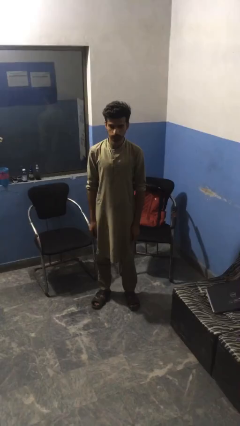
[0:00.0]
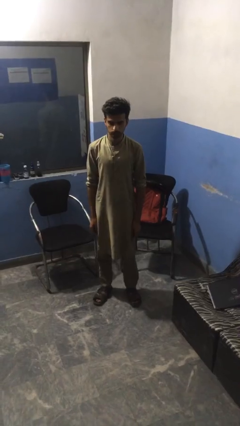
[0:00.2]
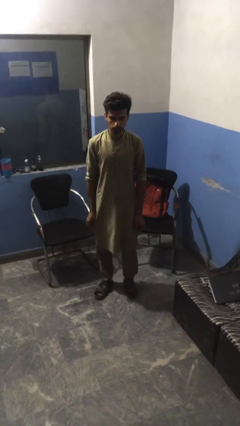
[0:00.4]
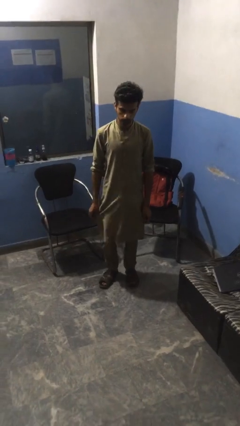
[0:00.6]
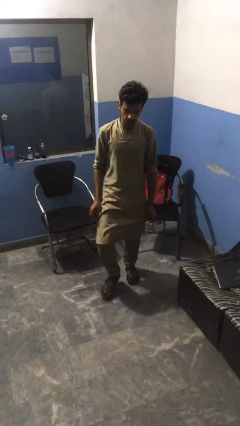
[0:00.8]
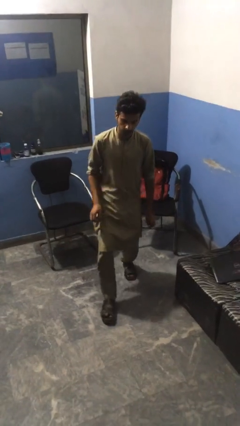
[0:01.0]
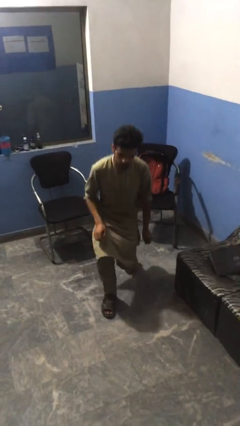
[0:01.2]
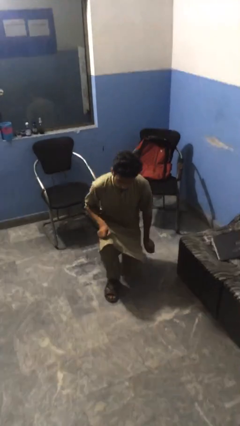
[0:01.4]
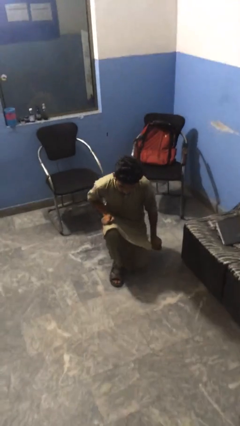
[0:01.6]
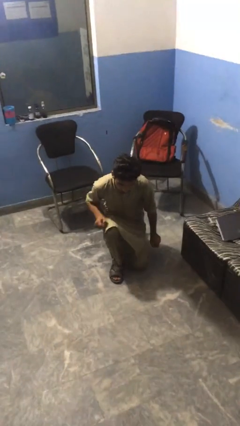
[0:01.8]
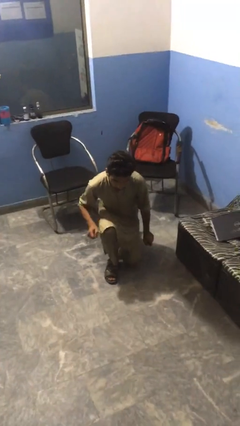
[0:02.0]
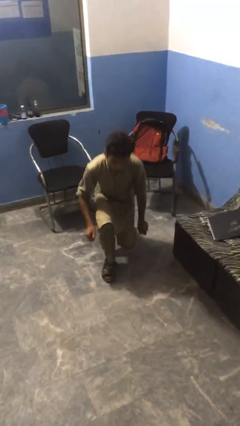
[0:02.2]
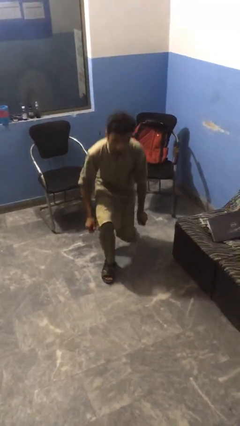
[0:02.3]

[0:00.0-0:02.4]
person exercises with lunges

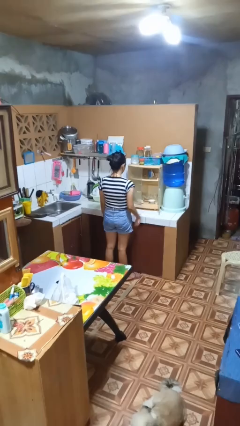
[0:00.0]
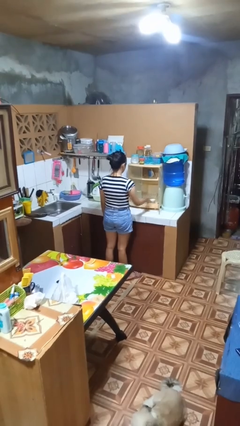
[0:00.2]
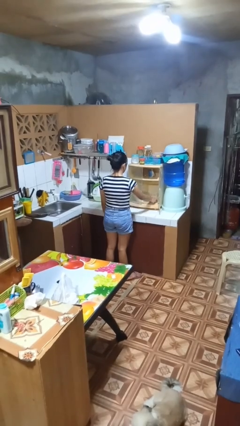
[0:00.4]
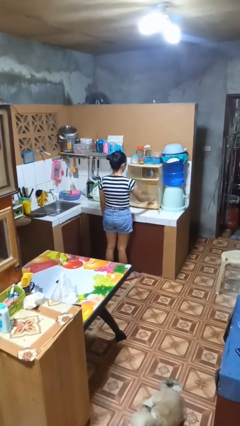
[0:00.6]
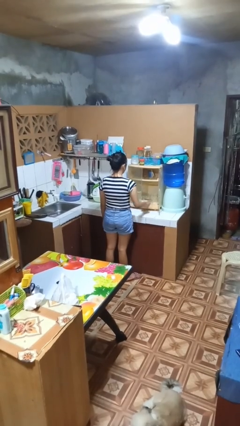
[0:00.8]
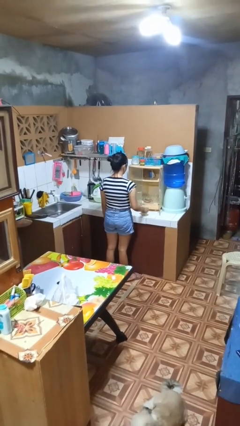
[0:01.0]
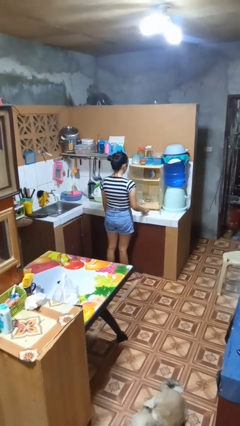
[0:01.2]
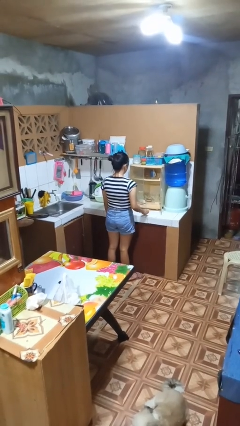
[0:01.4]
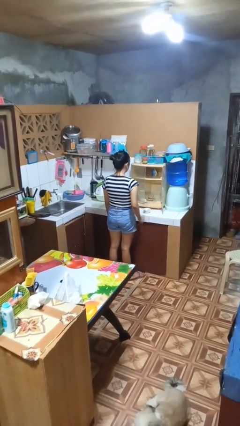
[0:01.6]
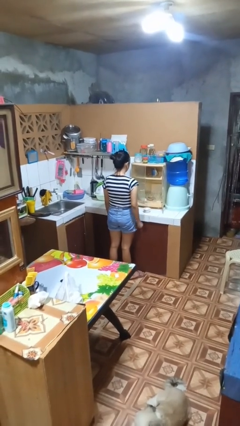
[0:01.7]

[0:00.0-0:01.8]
person takes object from cabinet

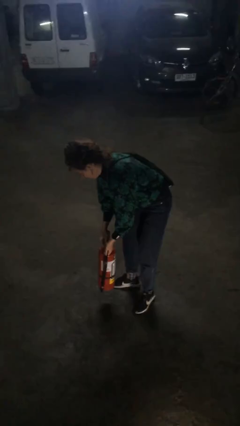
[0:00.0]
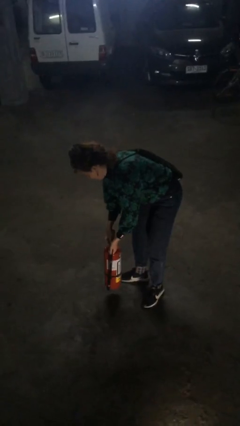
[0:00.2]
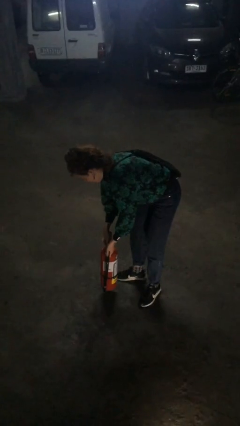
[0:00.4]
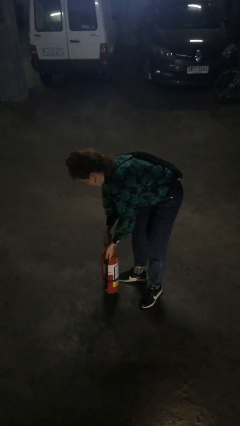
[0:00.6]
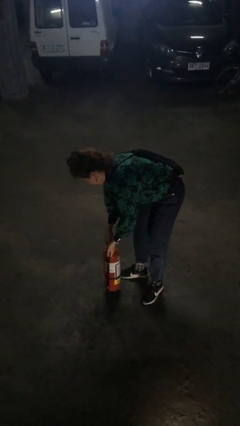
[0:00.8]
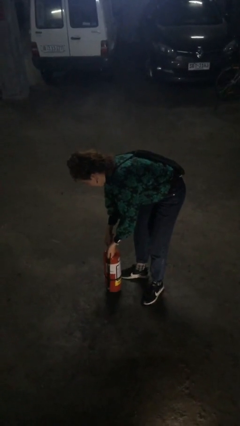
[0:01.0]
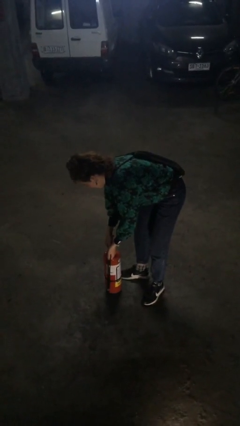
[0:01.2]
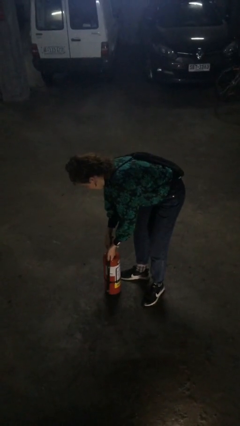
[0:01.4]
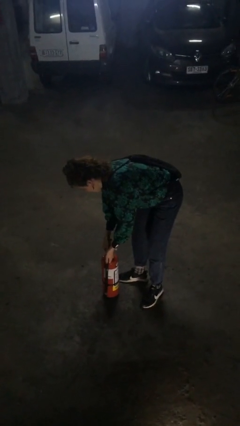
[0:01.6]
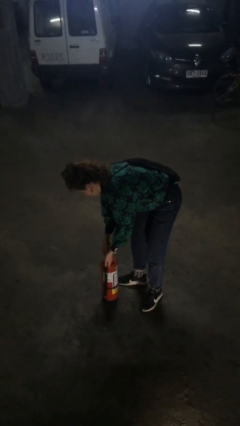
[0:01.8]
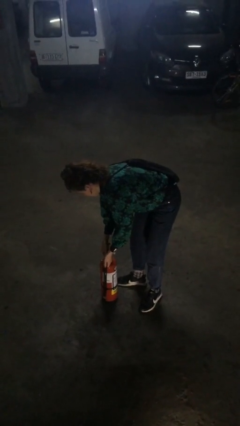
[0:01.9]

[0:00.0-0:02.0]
person puts down object on floor

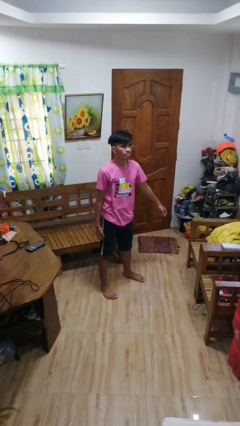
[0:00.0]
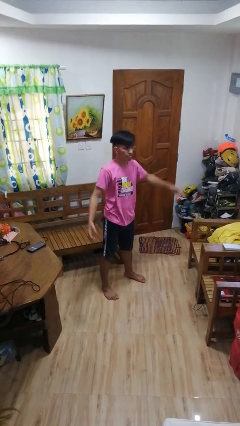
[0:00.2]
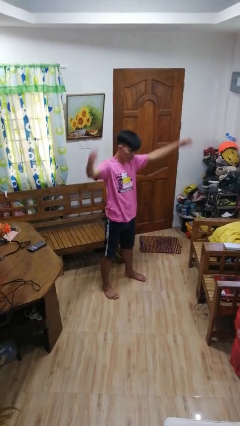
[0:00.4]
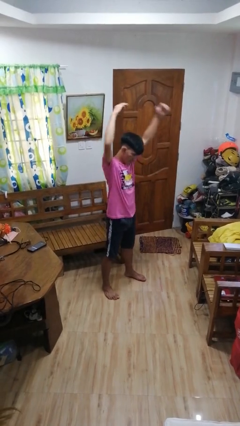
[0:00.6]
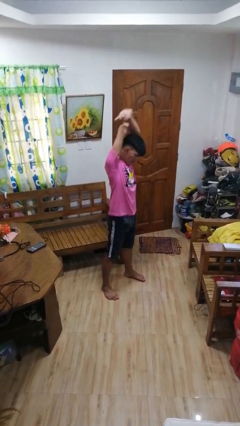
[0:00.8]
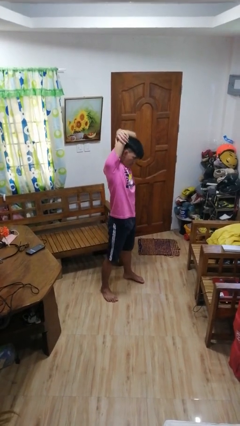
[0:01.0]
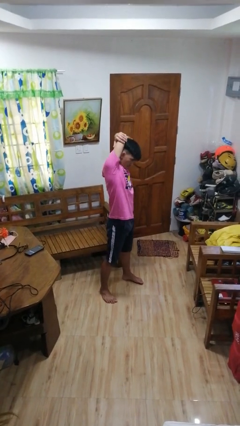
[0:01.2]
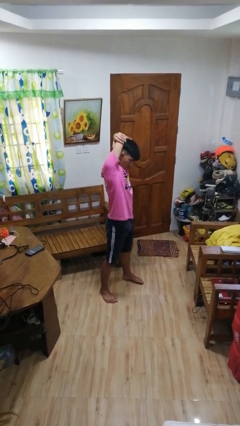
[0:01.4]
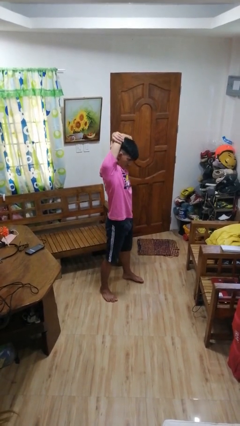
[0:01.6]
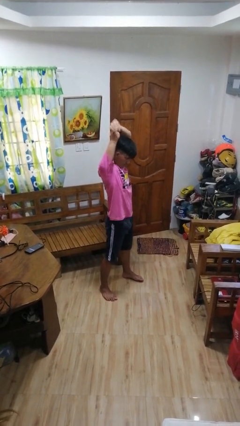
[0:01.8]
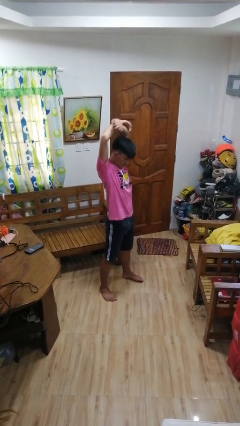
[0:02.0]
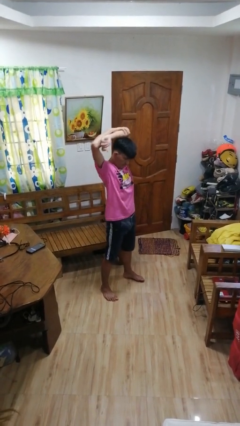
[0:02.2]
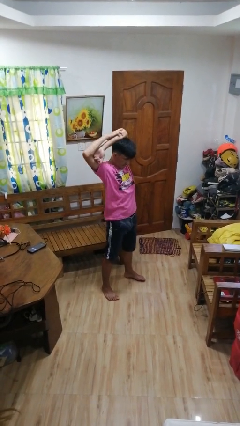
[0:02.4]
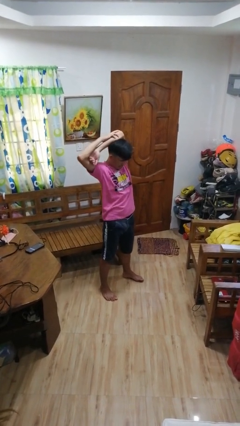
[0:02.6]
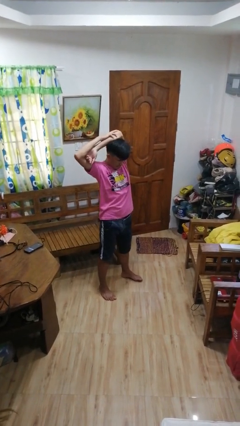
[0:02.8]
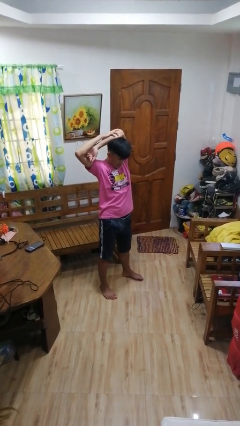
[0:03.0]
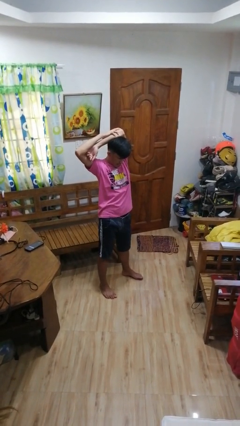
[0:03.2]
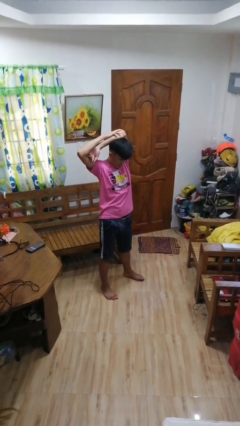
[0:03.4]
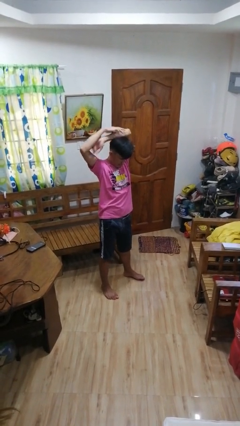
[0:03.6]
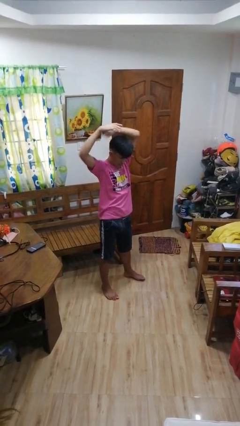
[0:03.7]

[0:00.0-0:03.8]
person stretches arms over head

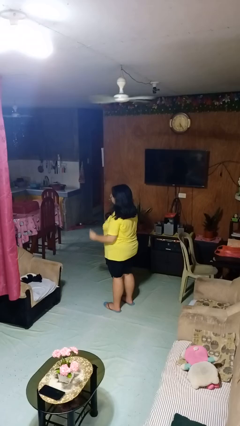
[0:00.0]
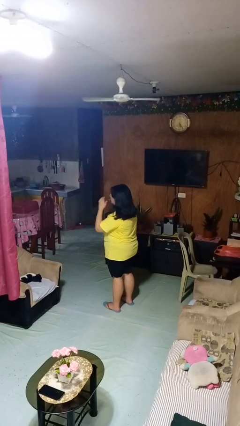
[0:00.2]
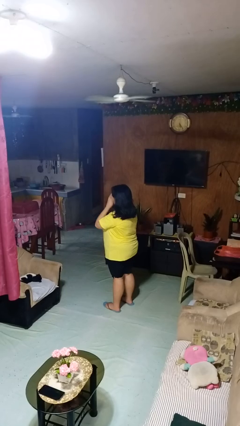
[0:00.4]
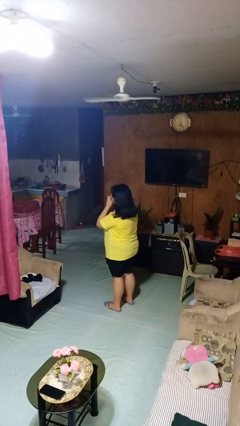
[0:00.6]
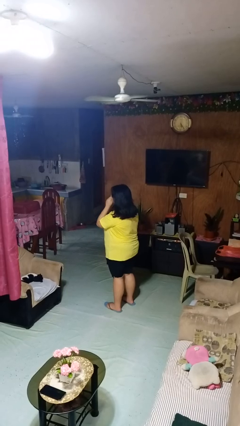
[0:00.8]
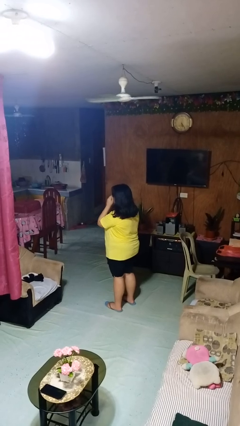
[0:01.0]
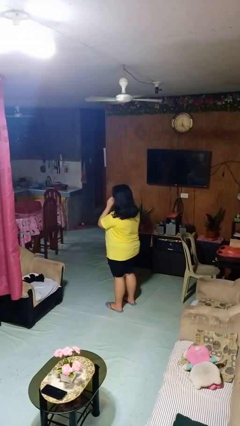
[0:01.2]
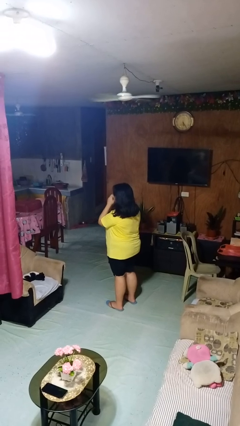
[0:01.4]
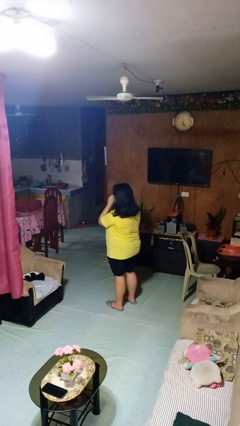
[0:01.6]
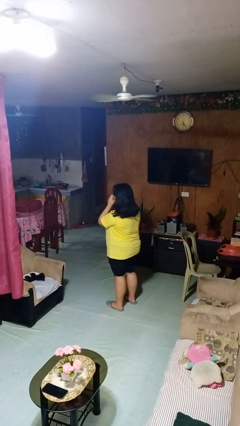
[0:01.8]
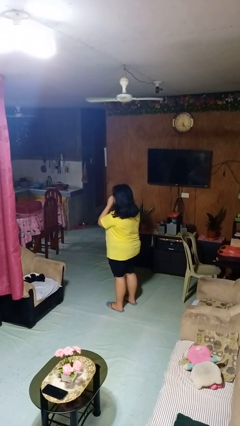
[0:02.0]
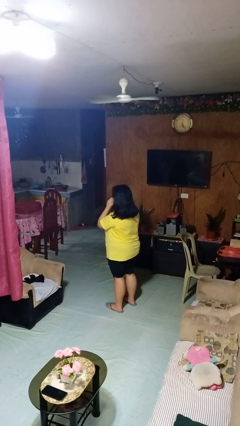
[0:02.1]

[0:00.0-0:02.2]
person scratches face

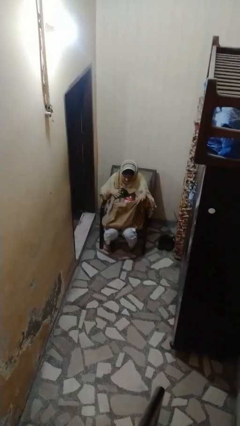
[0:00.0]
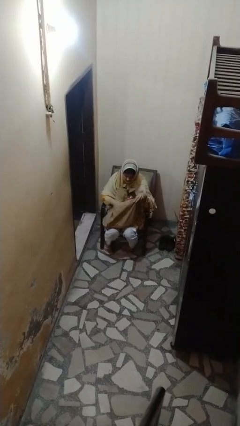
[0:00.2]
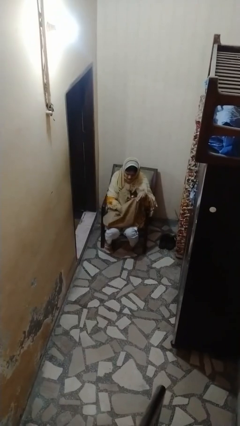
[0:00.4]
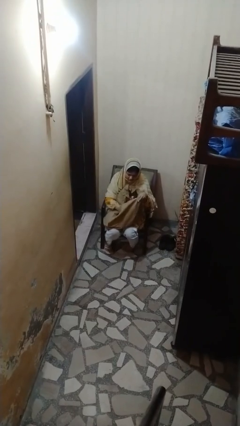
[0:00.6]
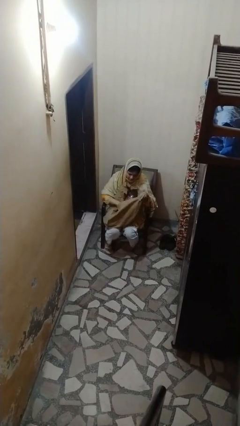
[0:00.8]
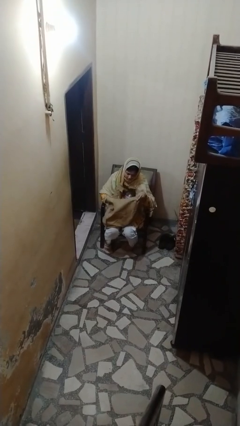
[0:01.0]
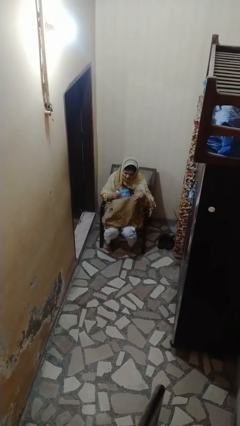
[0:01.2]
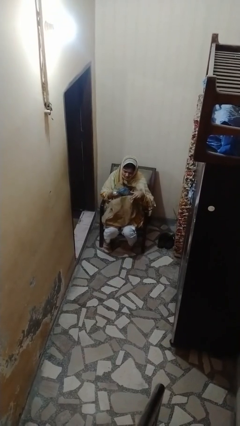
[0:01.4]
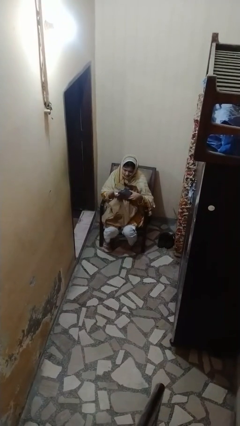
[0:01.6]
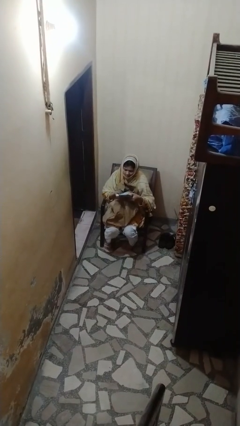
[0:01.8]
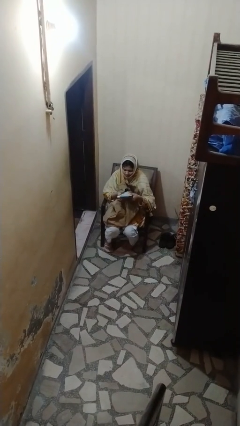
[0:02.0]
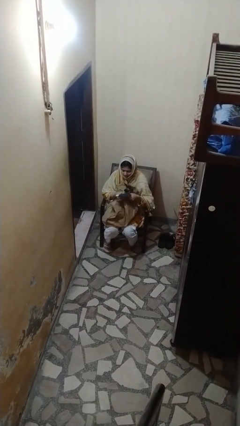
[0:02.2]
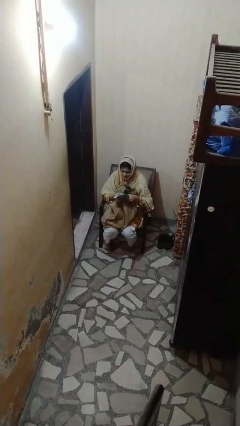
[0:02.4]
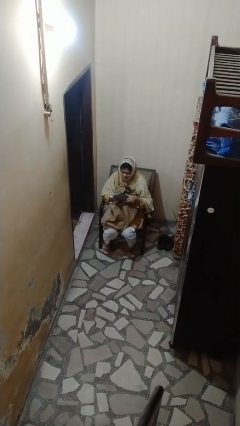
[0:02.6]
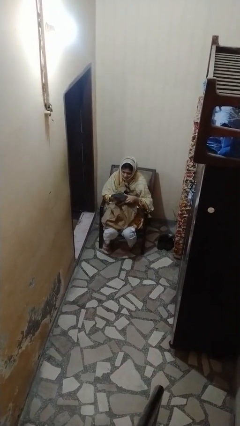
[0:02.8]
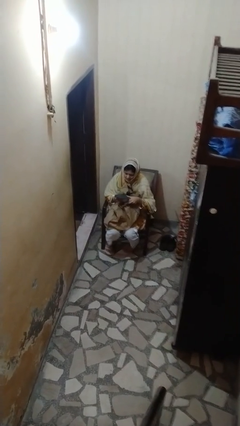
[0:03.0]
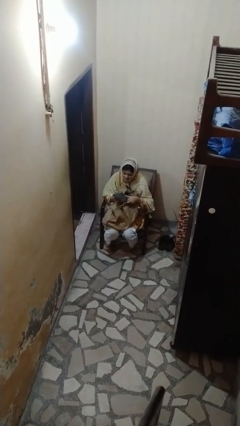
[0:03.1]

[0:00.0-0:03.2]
person takes object from bag

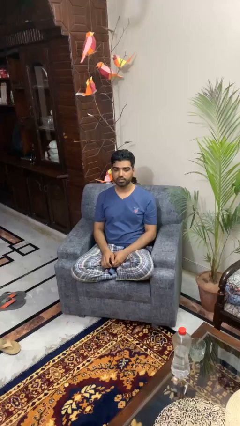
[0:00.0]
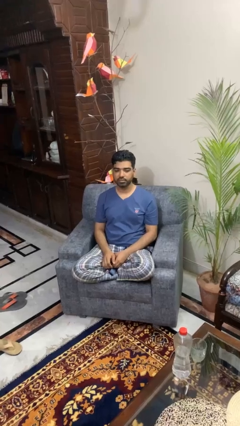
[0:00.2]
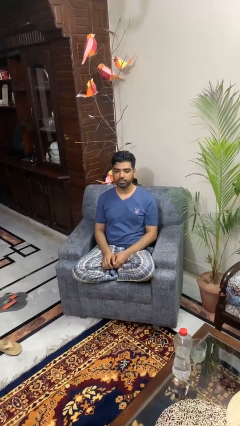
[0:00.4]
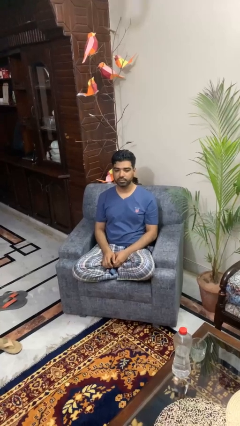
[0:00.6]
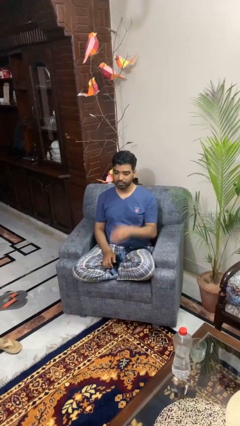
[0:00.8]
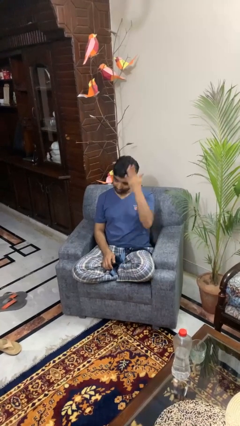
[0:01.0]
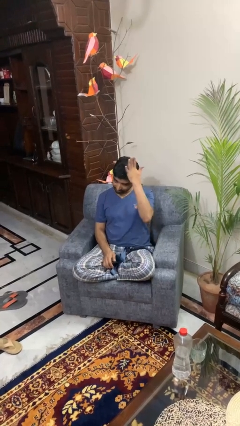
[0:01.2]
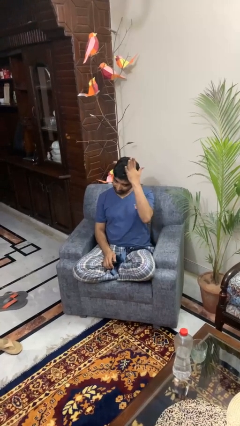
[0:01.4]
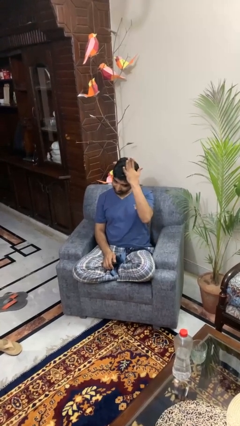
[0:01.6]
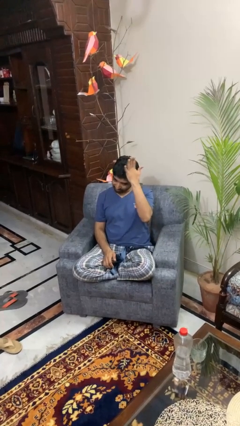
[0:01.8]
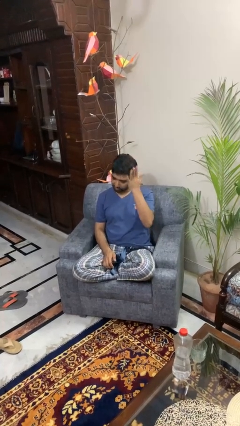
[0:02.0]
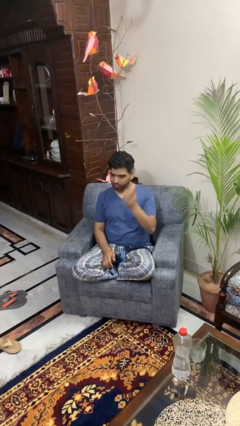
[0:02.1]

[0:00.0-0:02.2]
person pats head
